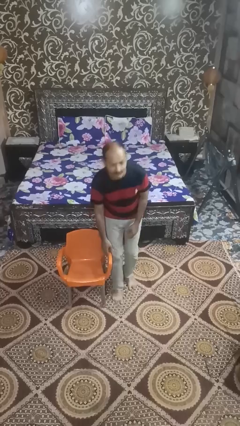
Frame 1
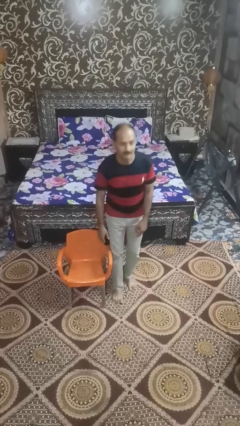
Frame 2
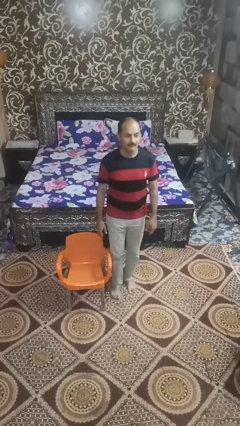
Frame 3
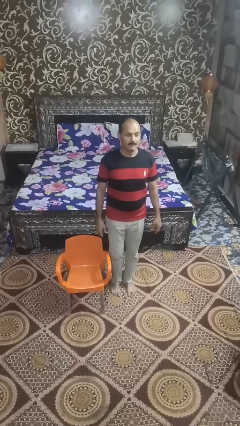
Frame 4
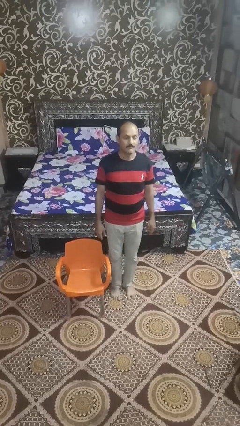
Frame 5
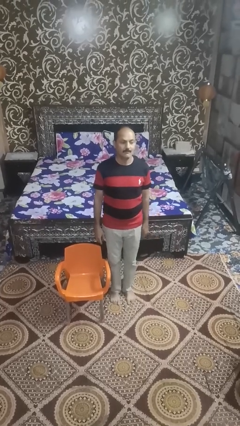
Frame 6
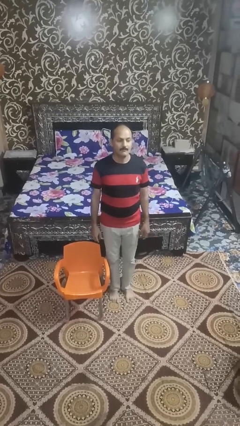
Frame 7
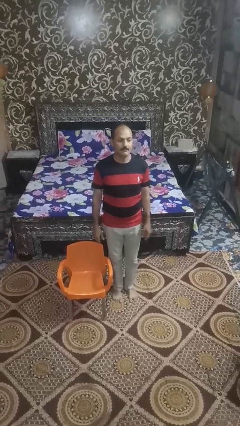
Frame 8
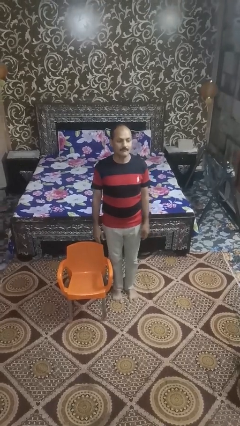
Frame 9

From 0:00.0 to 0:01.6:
person stands up from floor

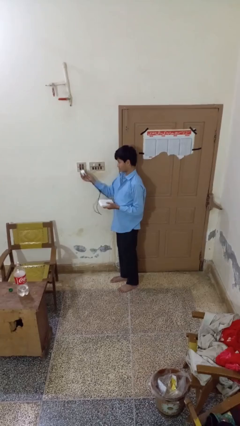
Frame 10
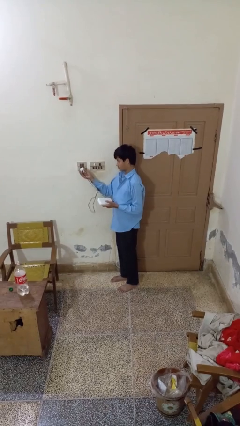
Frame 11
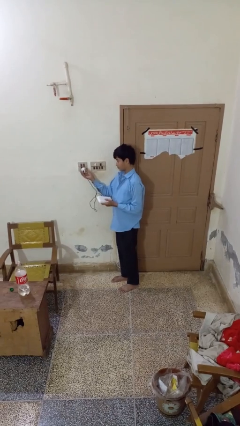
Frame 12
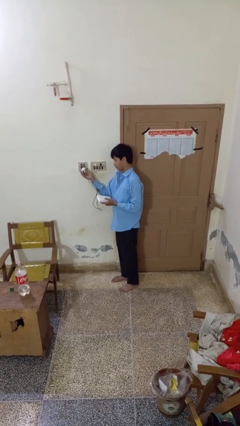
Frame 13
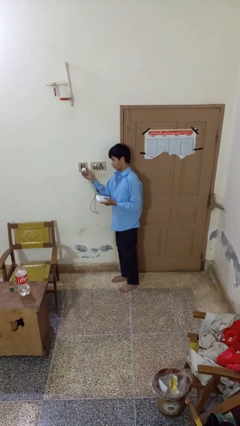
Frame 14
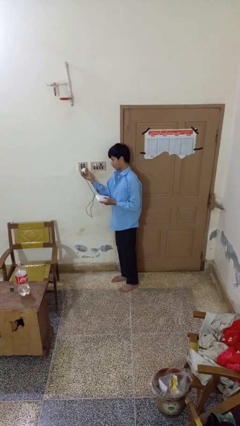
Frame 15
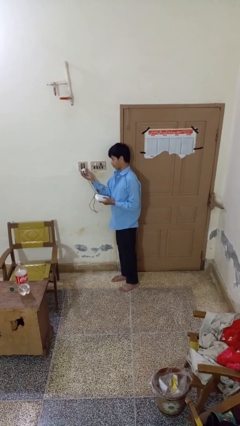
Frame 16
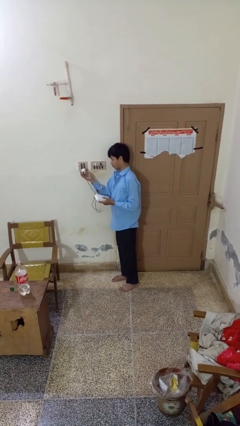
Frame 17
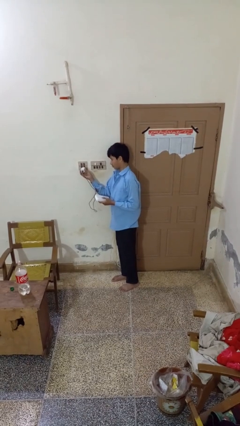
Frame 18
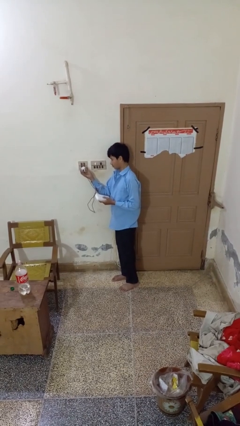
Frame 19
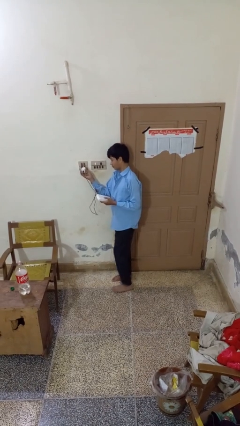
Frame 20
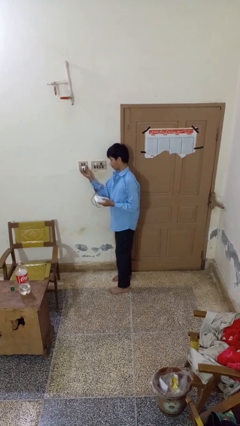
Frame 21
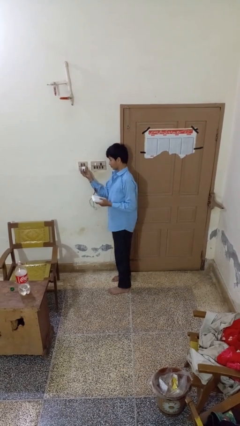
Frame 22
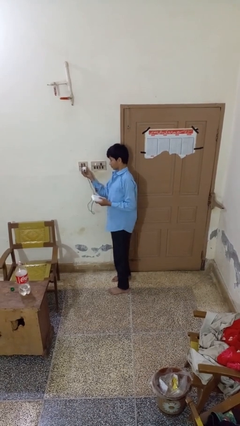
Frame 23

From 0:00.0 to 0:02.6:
person plugs into electrical socket

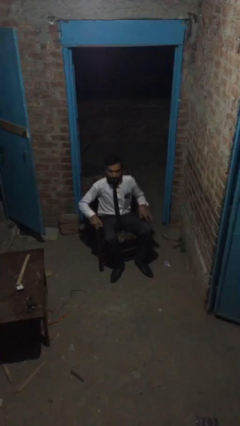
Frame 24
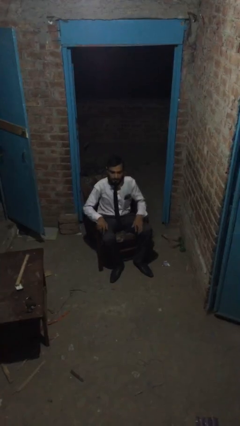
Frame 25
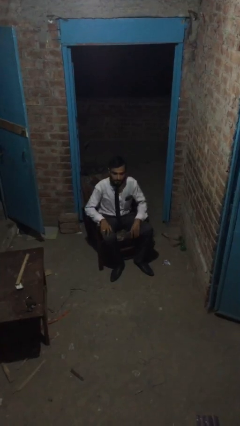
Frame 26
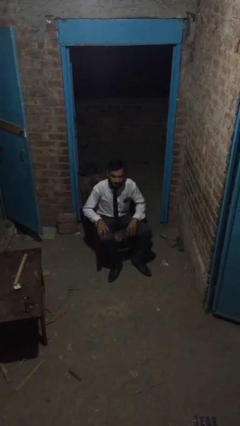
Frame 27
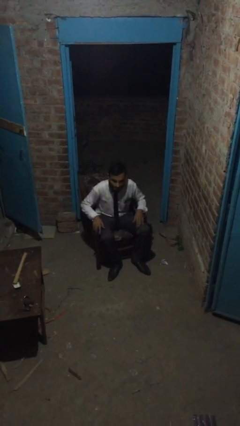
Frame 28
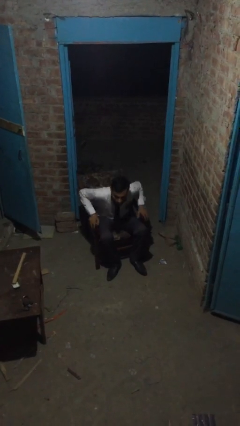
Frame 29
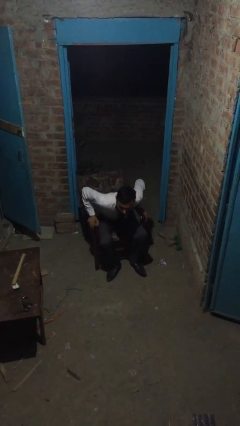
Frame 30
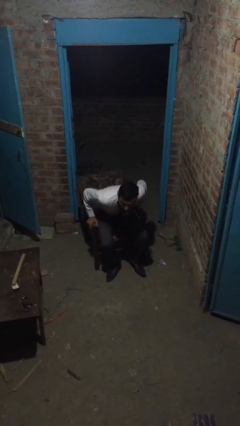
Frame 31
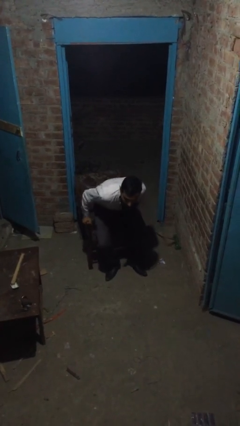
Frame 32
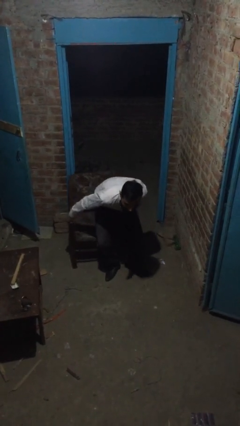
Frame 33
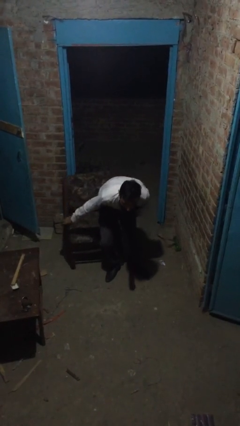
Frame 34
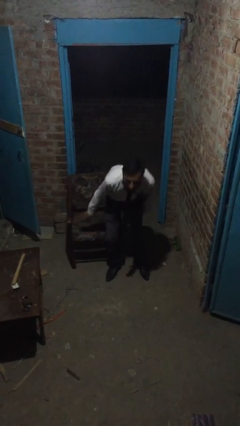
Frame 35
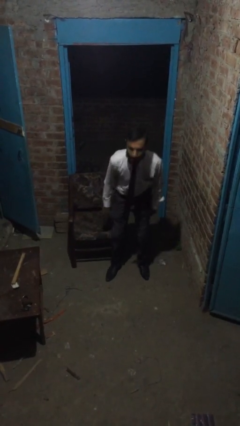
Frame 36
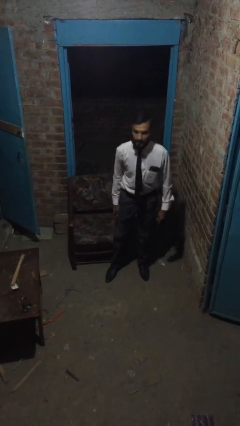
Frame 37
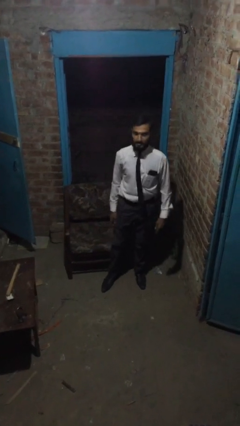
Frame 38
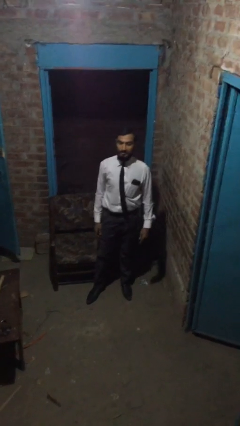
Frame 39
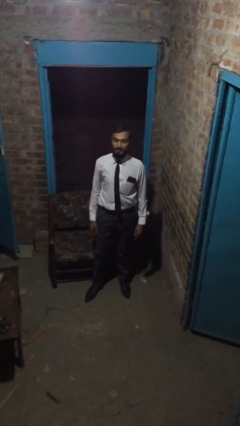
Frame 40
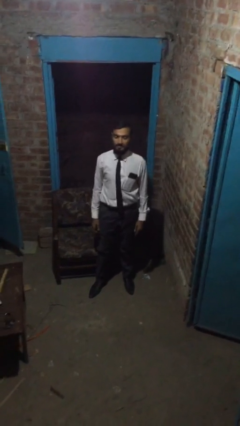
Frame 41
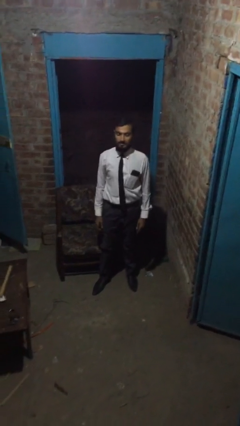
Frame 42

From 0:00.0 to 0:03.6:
person stands up

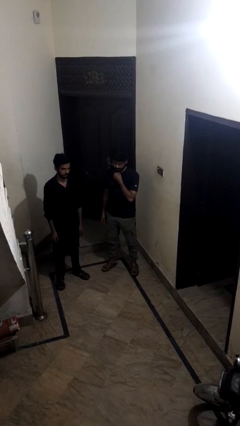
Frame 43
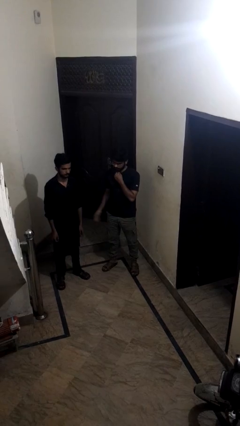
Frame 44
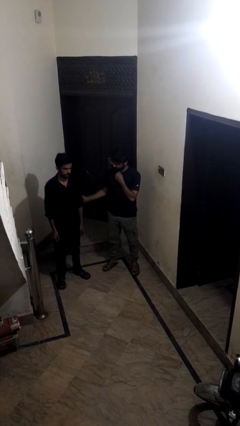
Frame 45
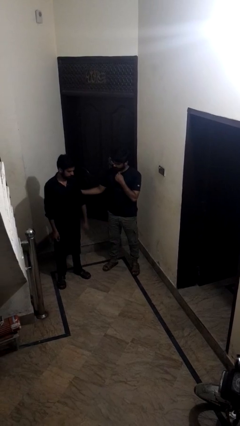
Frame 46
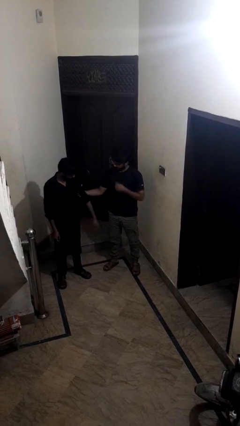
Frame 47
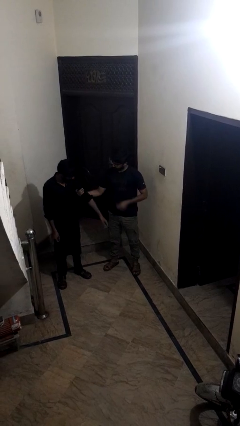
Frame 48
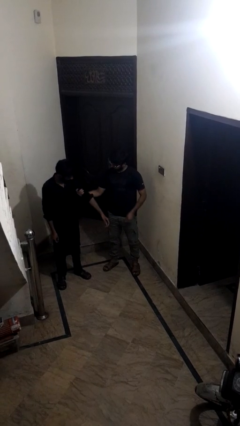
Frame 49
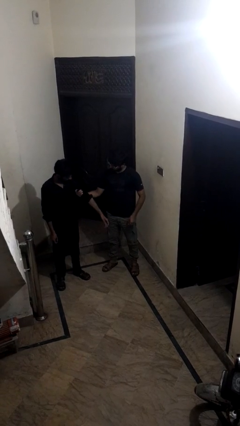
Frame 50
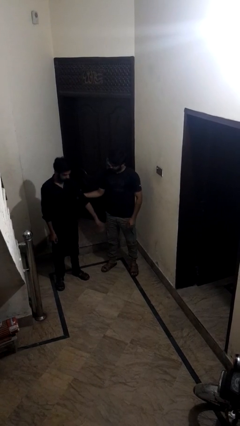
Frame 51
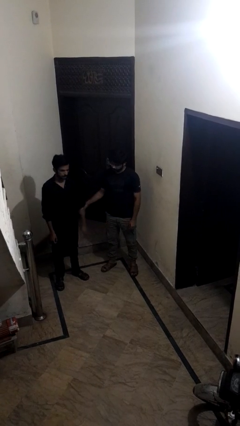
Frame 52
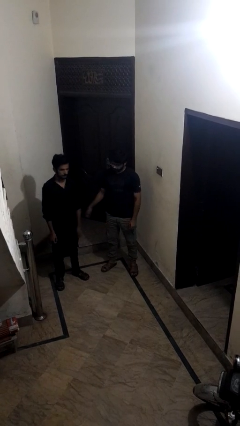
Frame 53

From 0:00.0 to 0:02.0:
person grabs person by bicep

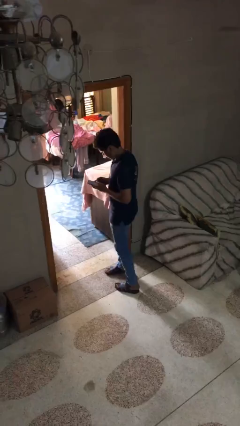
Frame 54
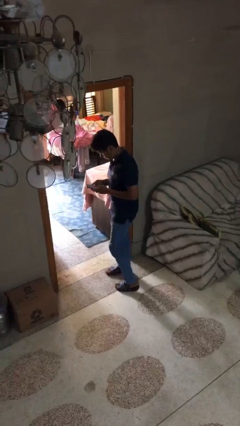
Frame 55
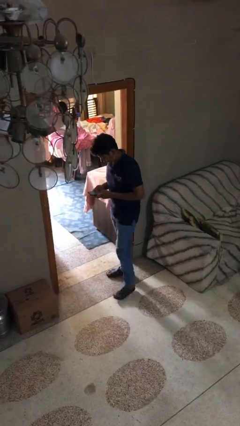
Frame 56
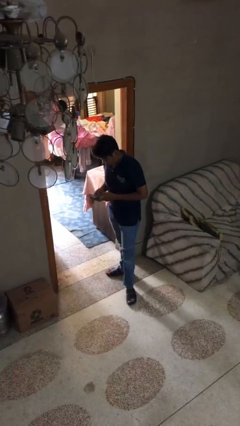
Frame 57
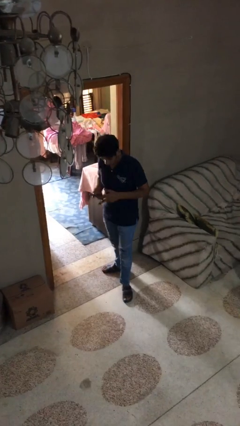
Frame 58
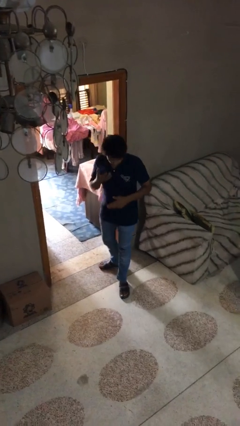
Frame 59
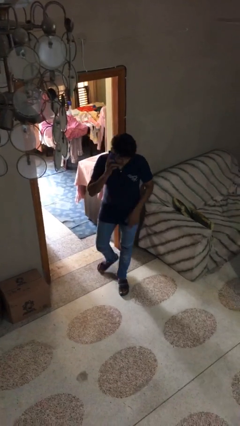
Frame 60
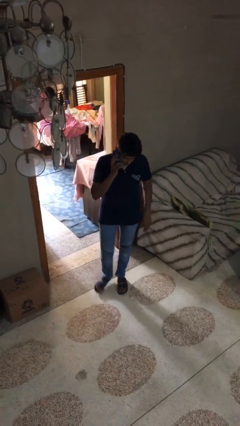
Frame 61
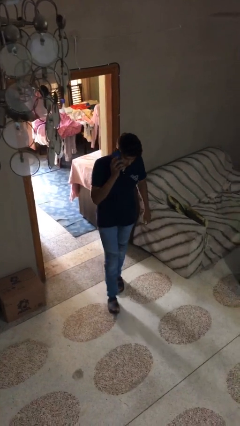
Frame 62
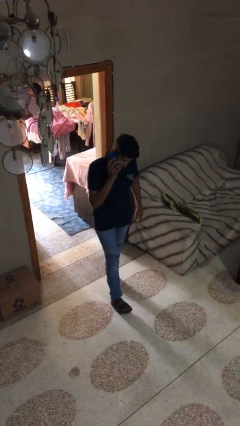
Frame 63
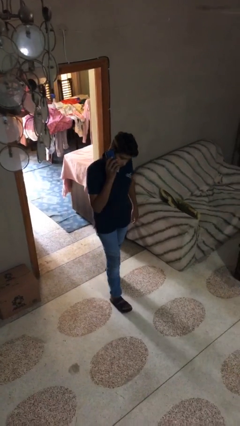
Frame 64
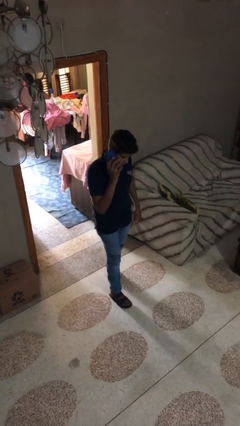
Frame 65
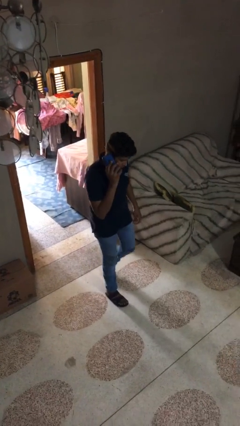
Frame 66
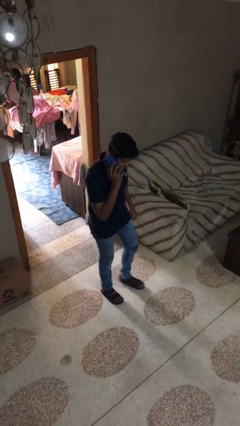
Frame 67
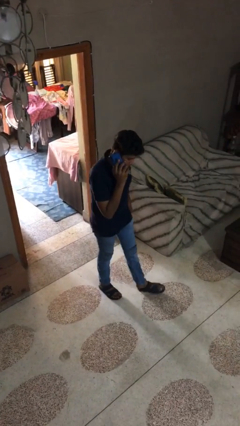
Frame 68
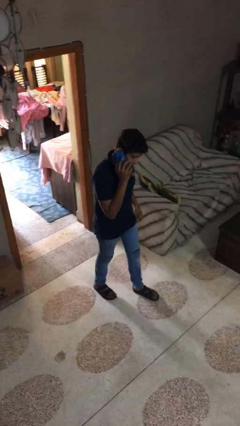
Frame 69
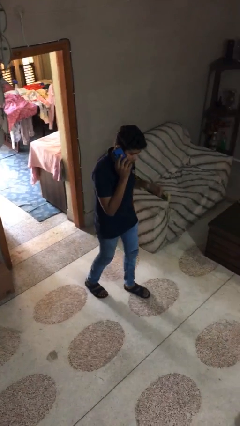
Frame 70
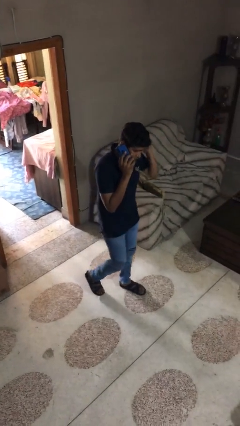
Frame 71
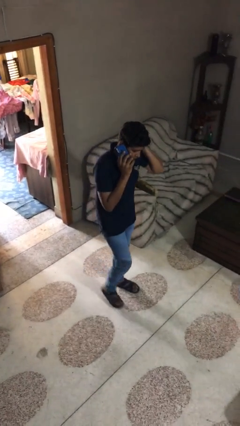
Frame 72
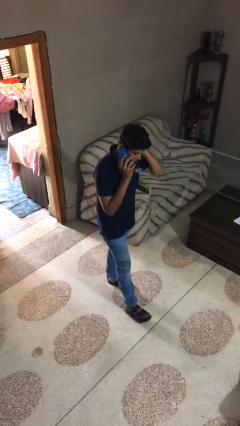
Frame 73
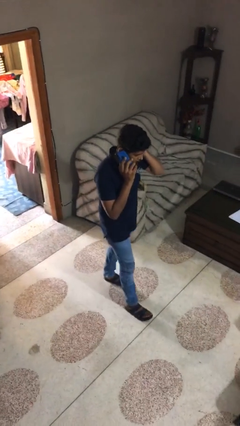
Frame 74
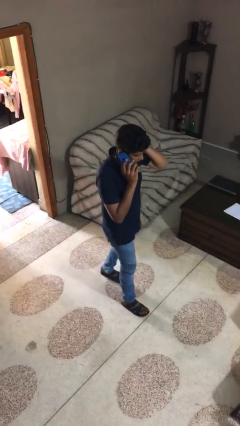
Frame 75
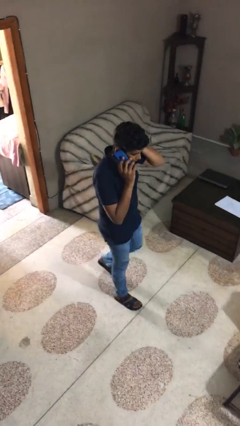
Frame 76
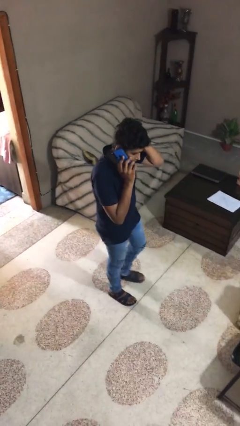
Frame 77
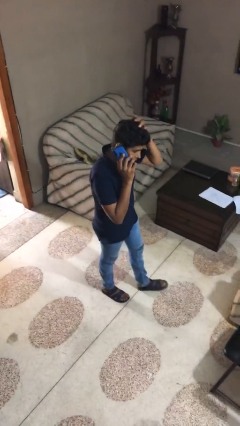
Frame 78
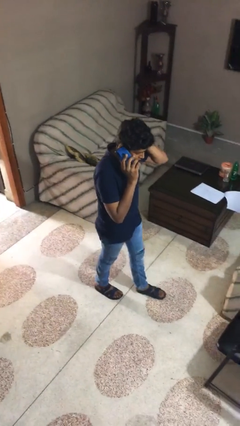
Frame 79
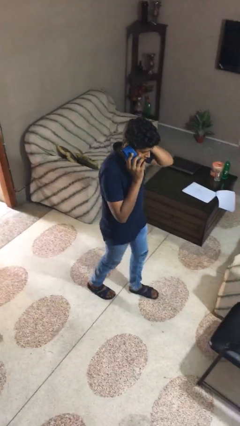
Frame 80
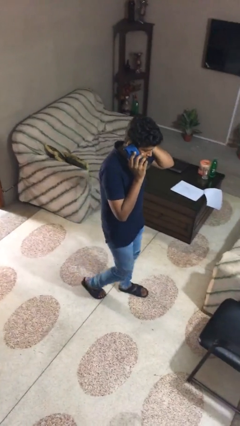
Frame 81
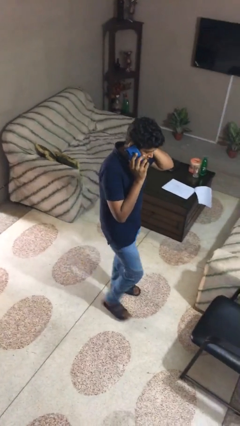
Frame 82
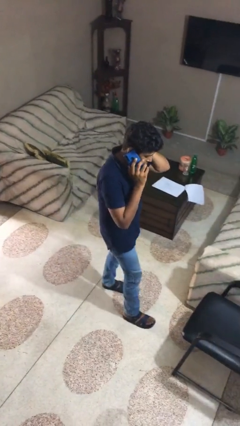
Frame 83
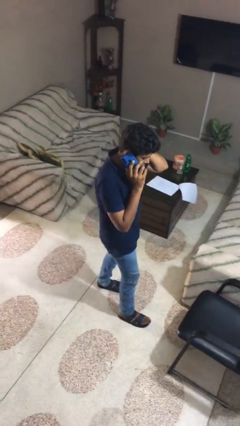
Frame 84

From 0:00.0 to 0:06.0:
person talks on phone

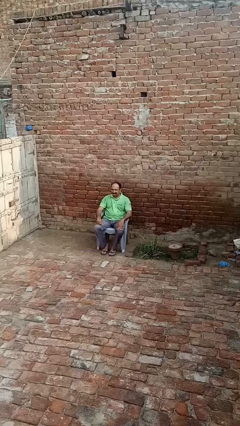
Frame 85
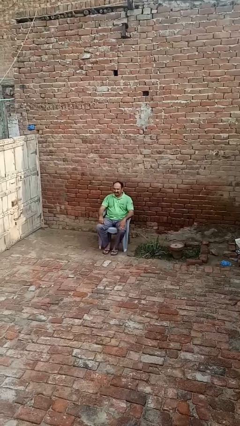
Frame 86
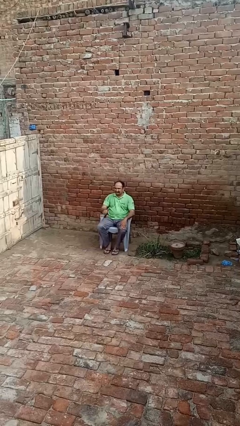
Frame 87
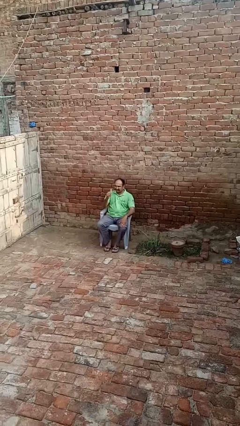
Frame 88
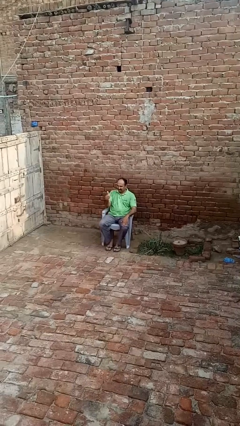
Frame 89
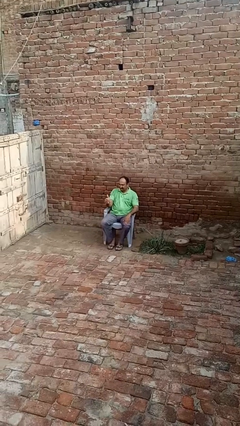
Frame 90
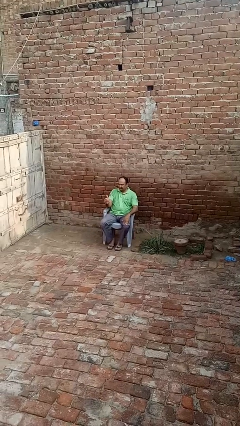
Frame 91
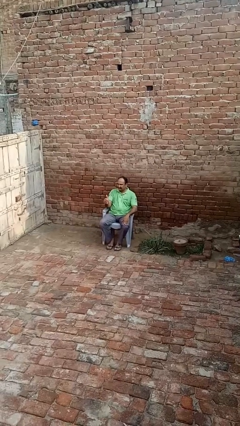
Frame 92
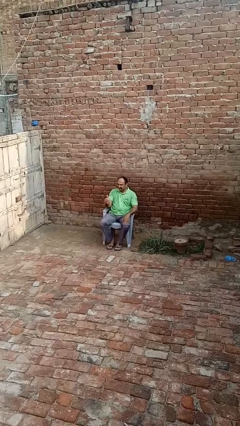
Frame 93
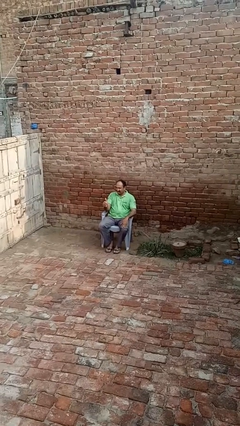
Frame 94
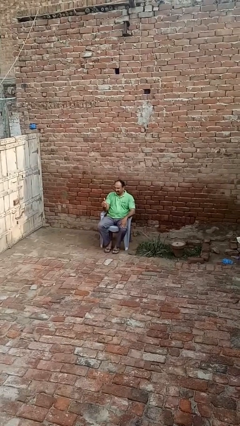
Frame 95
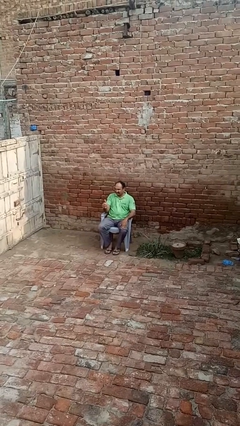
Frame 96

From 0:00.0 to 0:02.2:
person gestures thumbs up
